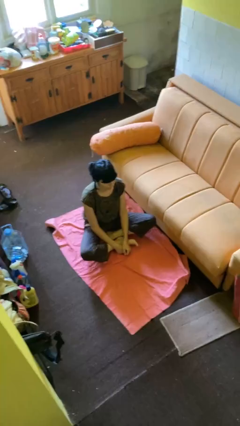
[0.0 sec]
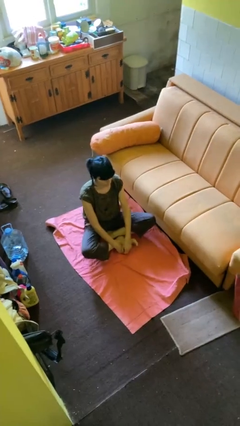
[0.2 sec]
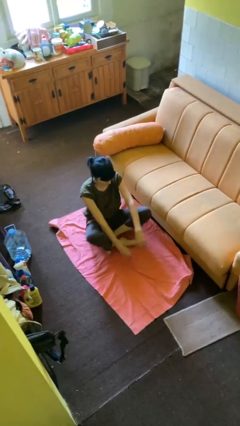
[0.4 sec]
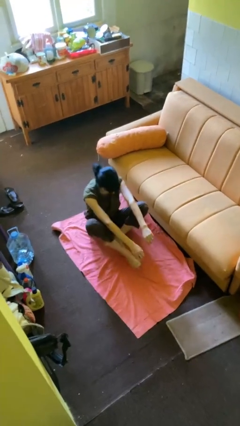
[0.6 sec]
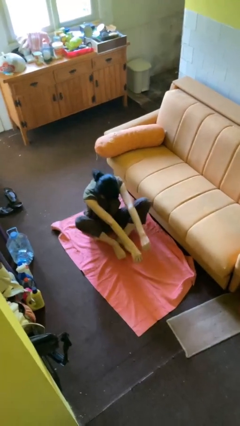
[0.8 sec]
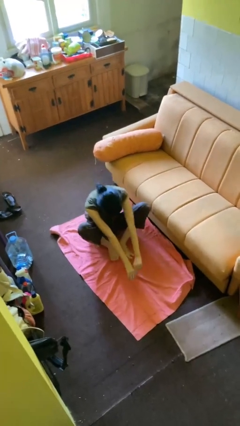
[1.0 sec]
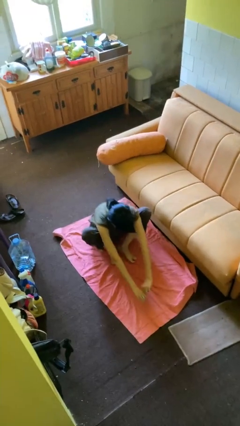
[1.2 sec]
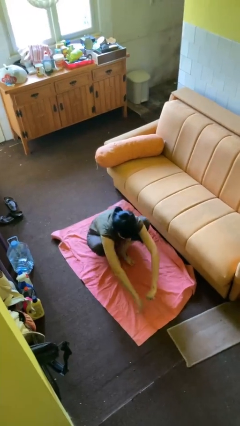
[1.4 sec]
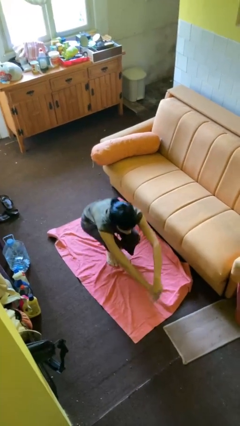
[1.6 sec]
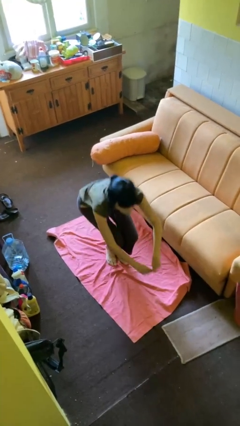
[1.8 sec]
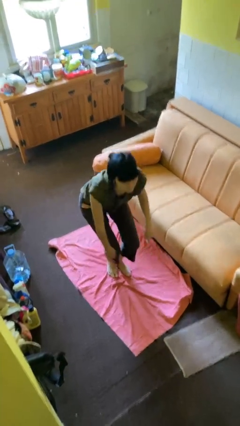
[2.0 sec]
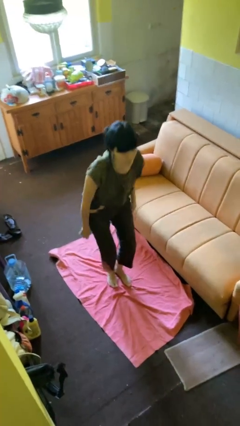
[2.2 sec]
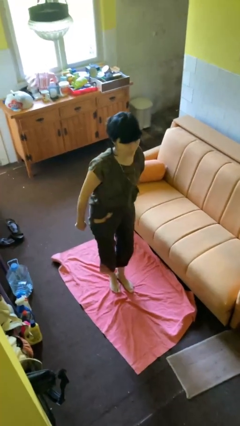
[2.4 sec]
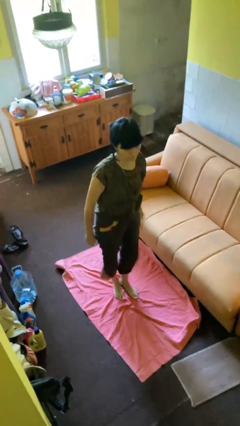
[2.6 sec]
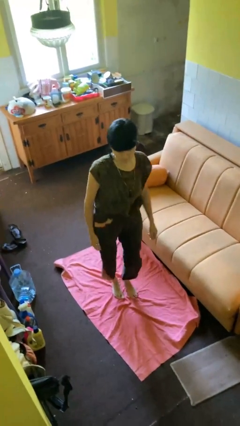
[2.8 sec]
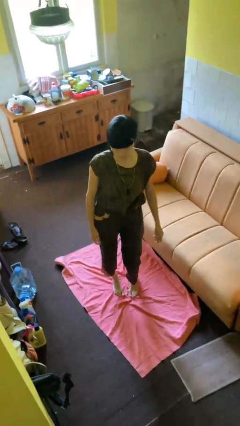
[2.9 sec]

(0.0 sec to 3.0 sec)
person stands up from floor

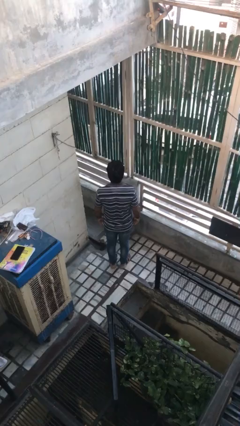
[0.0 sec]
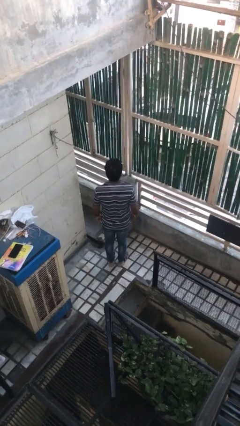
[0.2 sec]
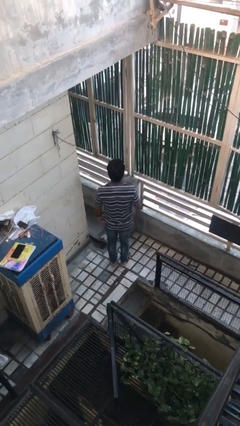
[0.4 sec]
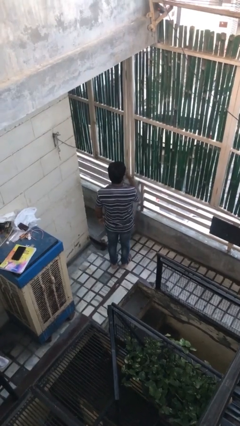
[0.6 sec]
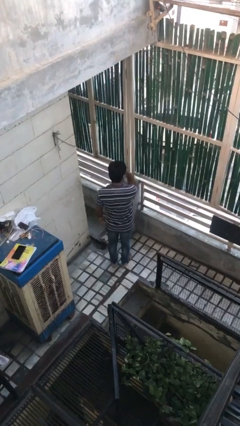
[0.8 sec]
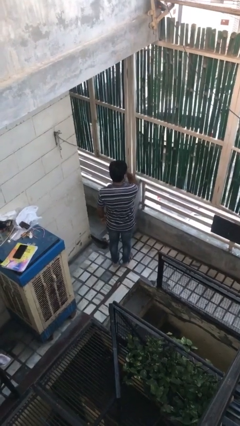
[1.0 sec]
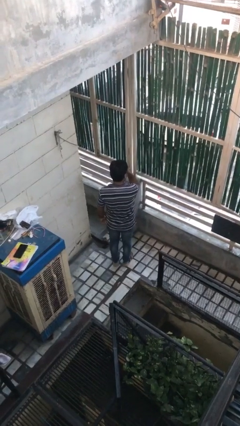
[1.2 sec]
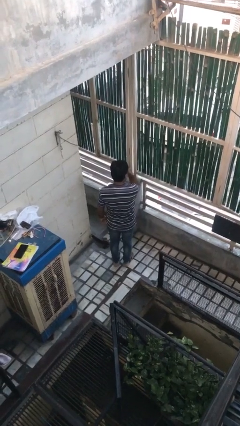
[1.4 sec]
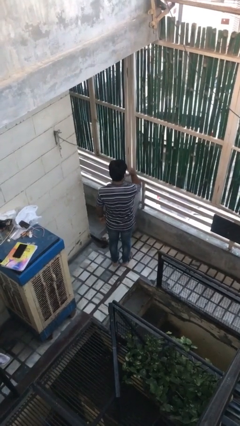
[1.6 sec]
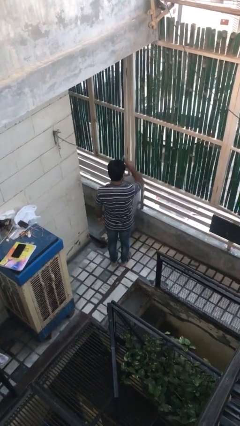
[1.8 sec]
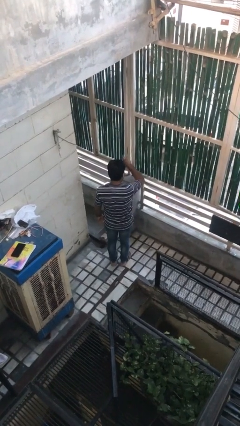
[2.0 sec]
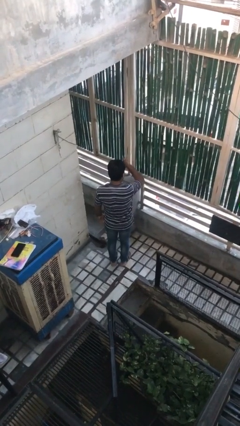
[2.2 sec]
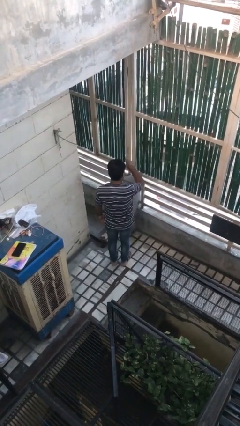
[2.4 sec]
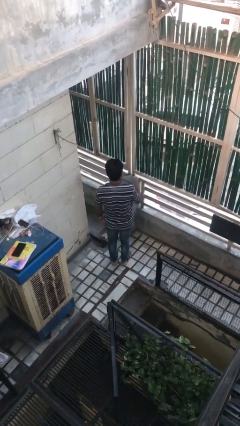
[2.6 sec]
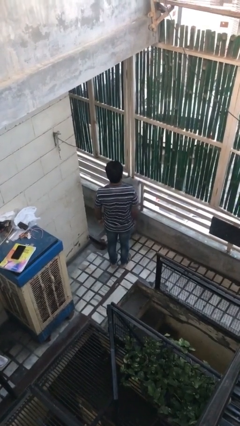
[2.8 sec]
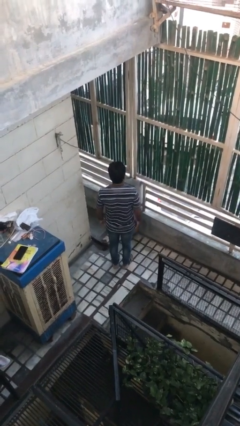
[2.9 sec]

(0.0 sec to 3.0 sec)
person gestures watch closely

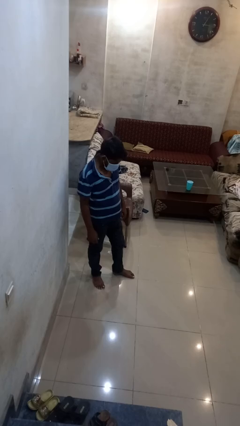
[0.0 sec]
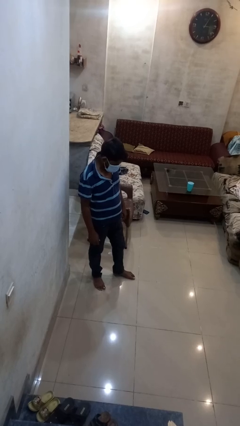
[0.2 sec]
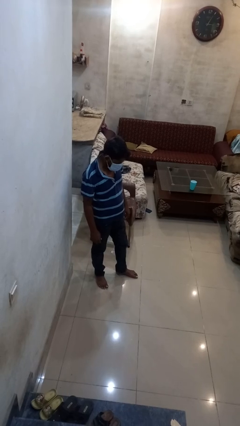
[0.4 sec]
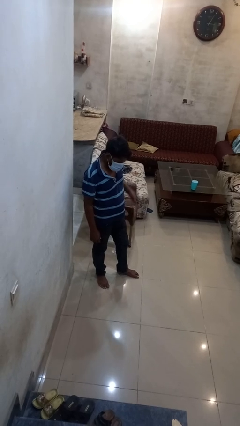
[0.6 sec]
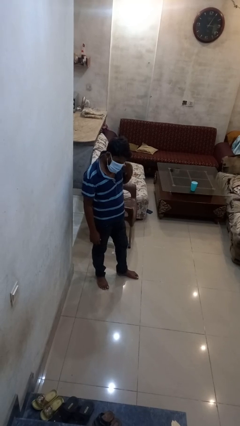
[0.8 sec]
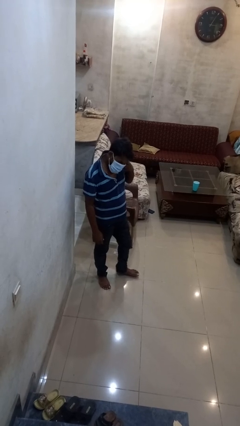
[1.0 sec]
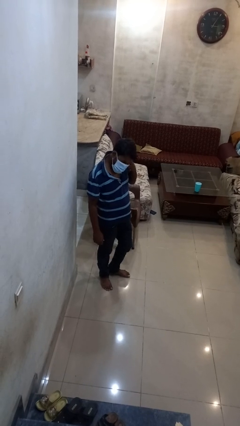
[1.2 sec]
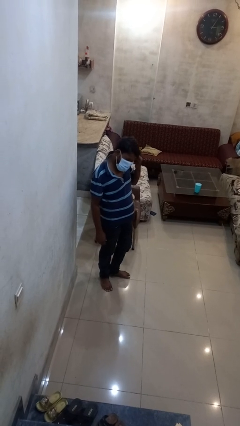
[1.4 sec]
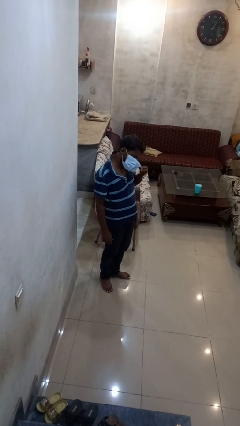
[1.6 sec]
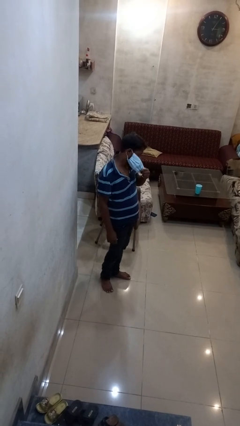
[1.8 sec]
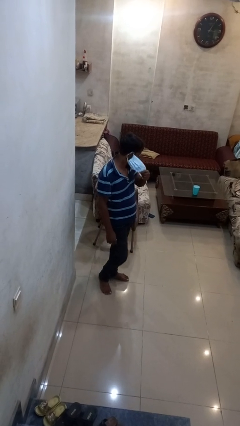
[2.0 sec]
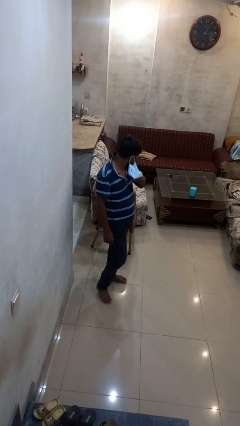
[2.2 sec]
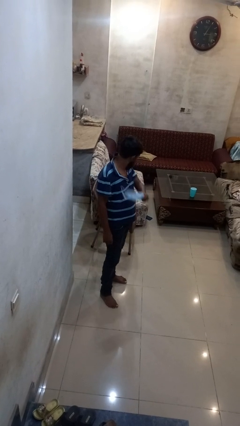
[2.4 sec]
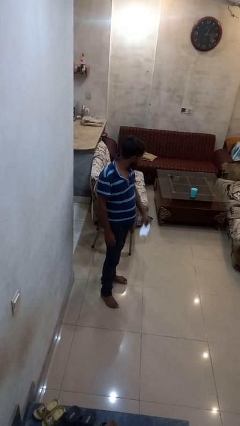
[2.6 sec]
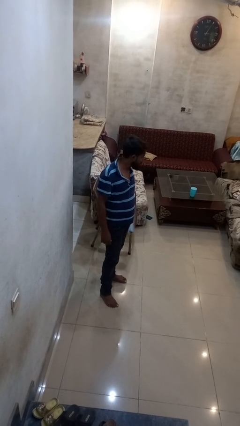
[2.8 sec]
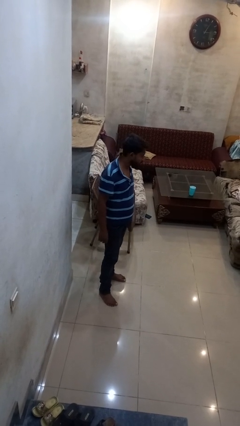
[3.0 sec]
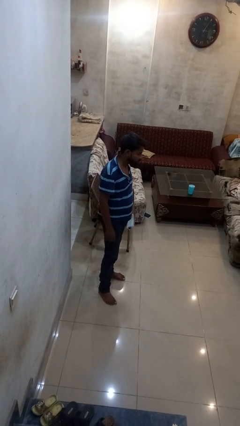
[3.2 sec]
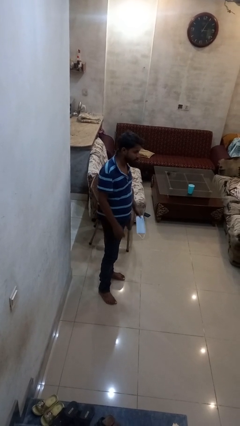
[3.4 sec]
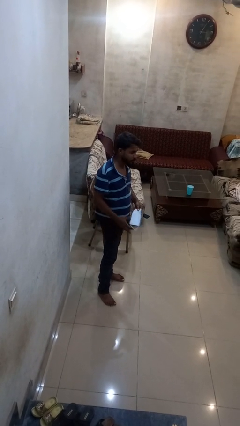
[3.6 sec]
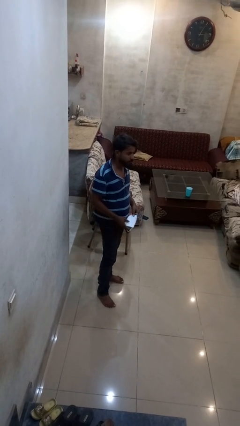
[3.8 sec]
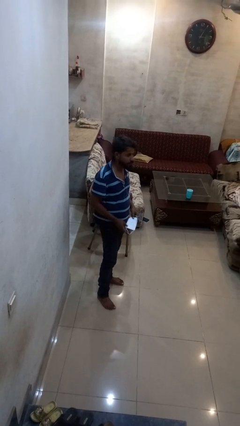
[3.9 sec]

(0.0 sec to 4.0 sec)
person takes off facemask

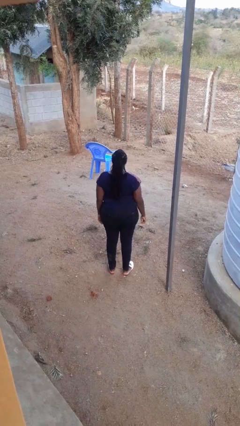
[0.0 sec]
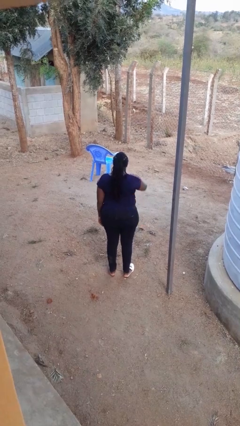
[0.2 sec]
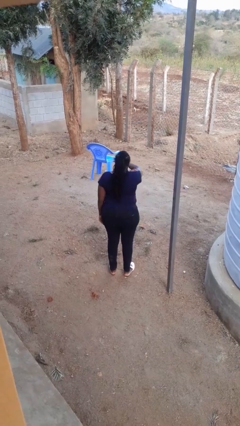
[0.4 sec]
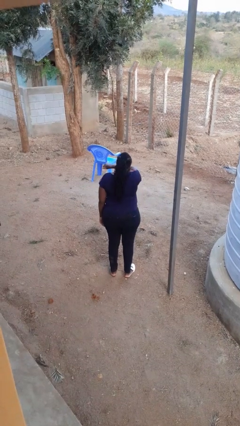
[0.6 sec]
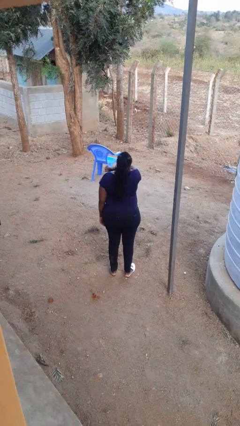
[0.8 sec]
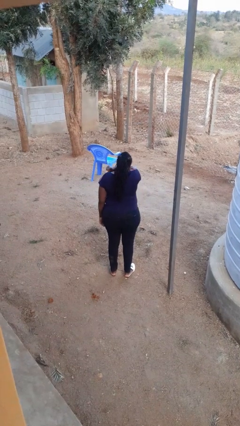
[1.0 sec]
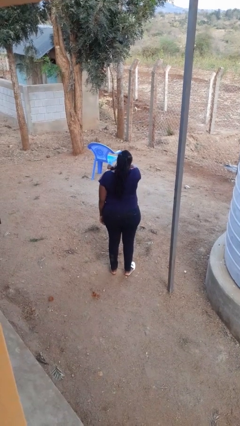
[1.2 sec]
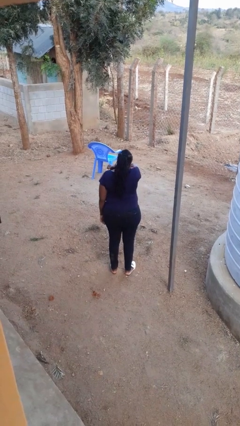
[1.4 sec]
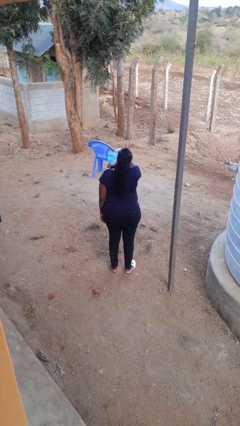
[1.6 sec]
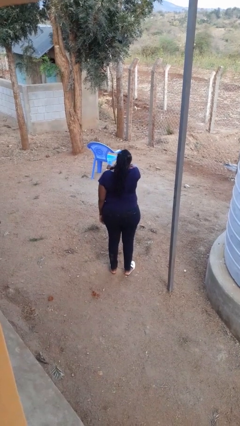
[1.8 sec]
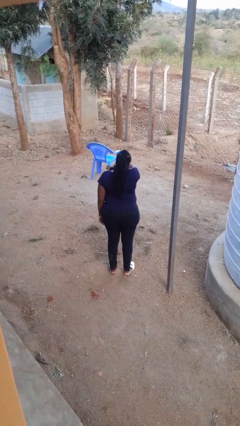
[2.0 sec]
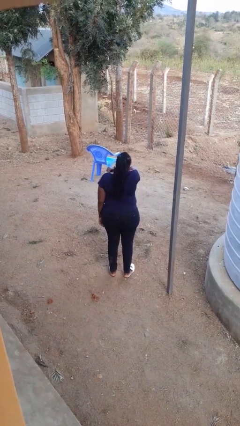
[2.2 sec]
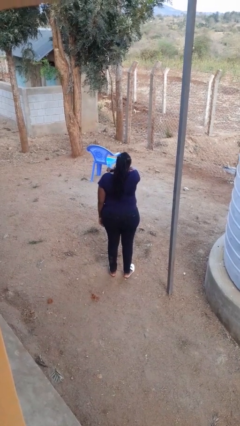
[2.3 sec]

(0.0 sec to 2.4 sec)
person sneezes into arm

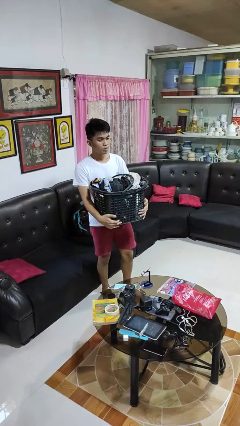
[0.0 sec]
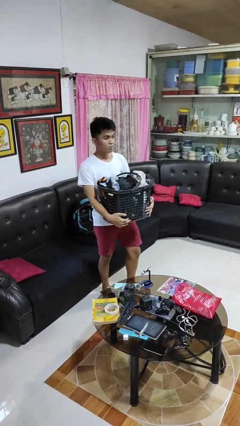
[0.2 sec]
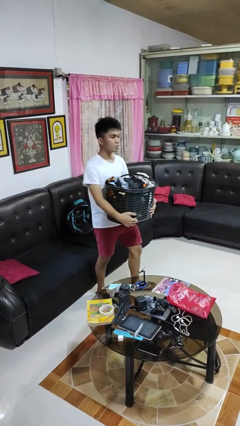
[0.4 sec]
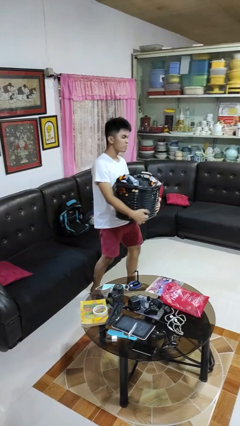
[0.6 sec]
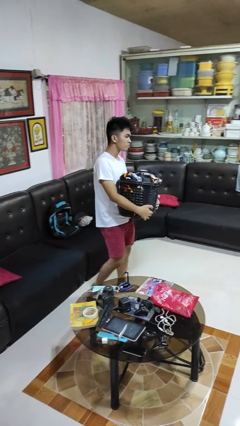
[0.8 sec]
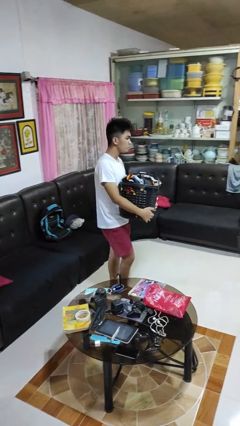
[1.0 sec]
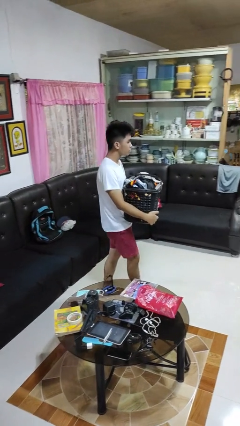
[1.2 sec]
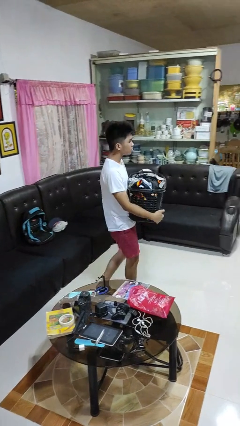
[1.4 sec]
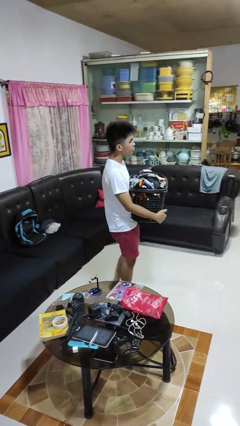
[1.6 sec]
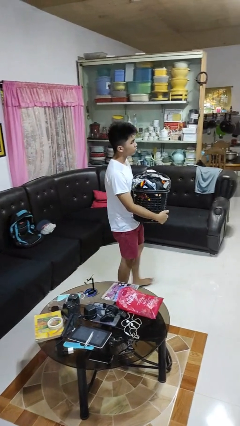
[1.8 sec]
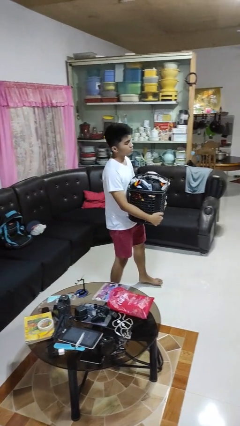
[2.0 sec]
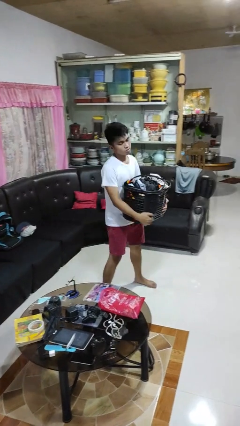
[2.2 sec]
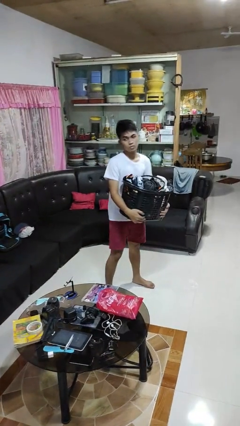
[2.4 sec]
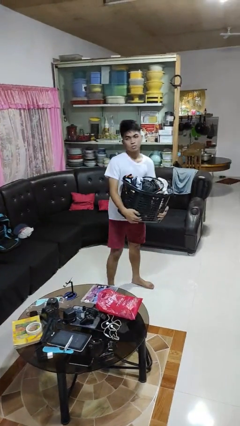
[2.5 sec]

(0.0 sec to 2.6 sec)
person carries laundry basket

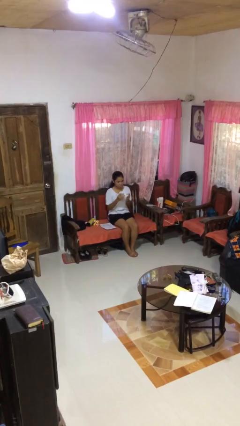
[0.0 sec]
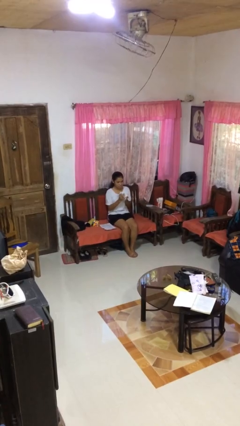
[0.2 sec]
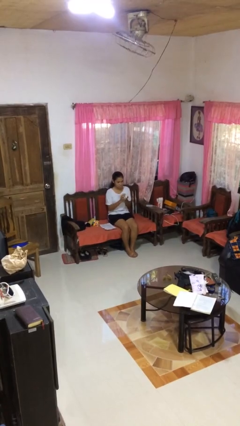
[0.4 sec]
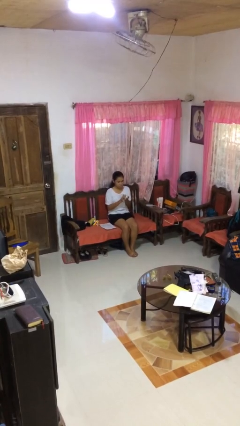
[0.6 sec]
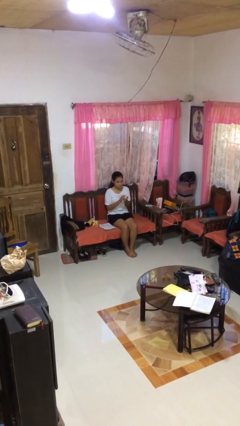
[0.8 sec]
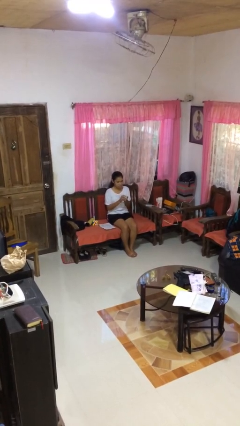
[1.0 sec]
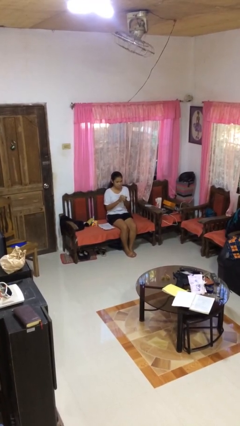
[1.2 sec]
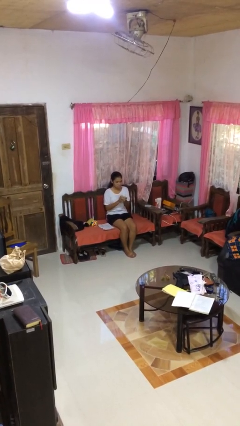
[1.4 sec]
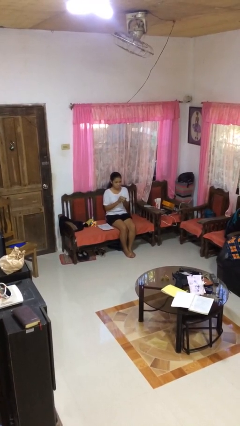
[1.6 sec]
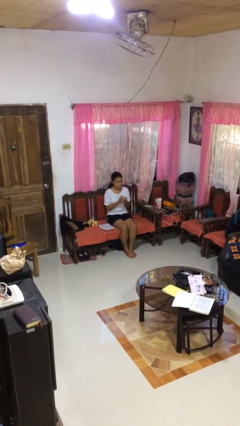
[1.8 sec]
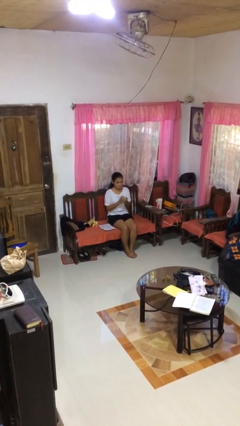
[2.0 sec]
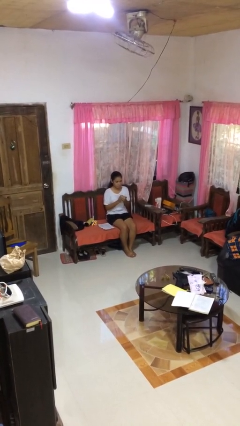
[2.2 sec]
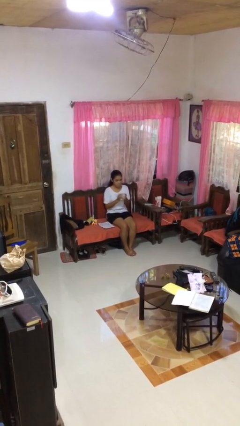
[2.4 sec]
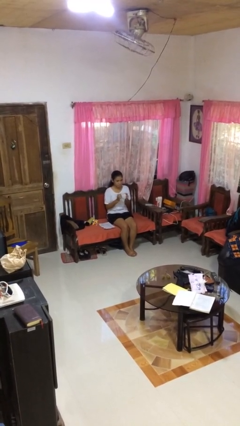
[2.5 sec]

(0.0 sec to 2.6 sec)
person crumples paper
